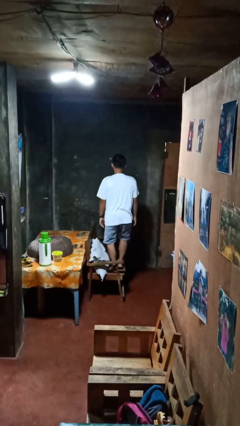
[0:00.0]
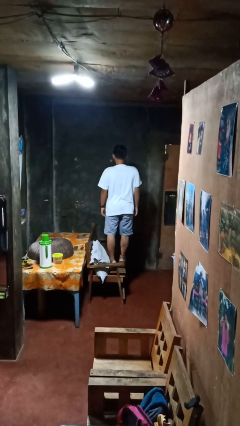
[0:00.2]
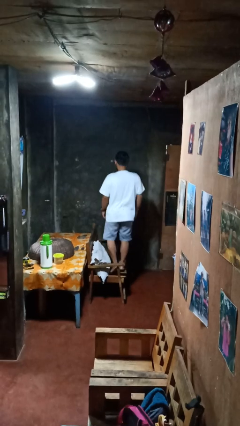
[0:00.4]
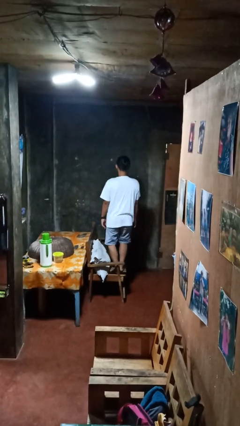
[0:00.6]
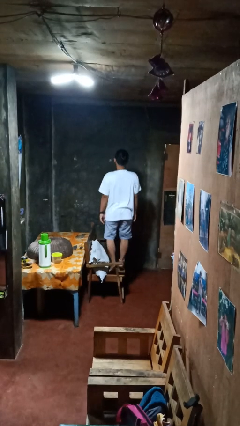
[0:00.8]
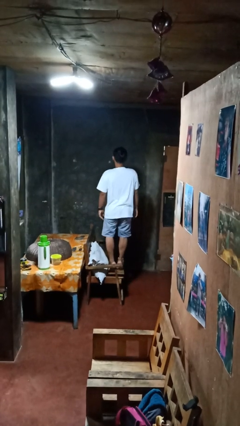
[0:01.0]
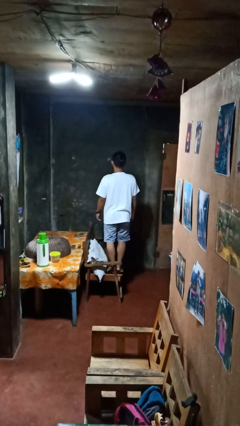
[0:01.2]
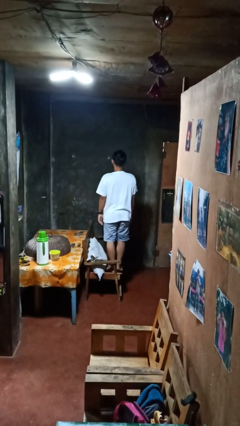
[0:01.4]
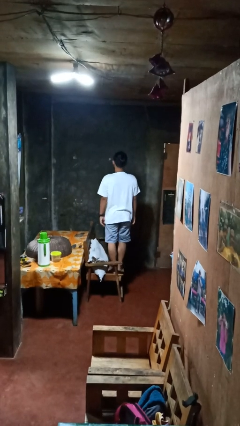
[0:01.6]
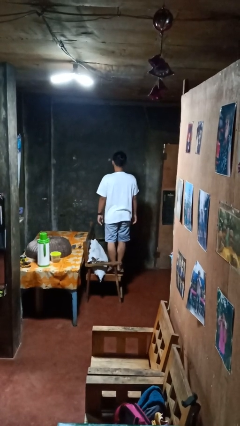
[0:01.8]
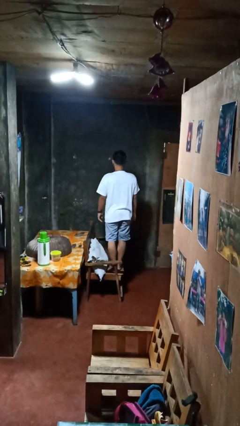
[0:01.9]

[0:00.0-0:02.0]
person jumps on couch

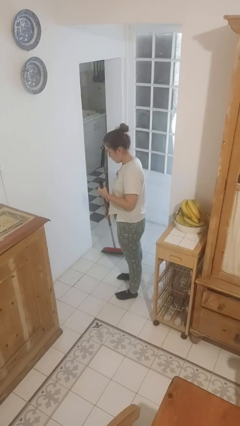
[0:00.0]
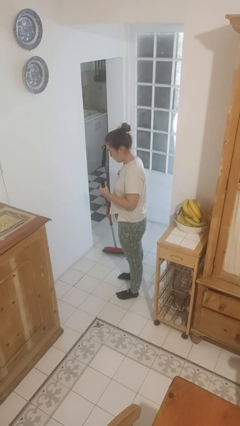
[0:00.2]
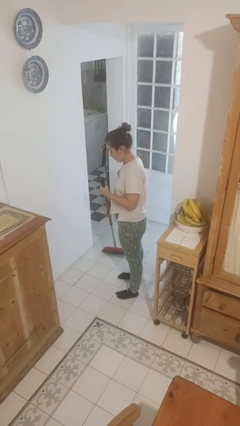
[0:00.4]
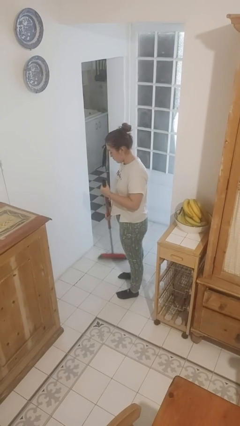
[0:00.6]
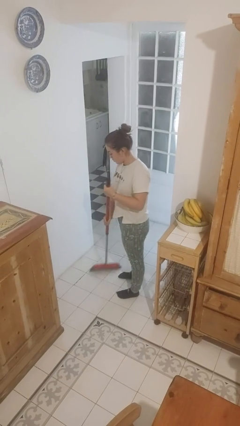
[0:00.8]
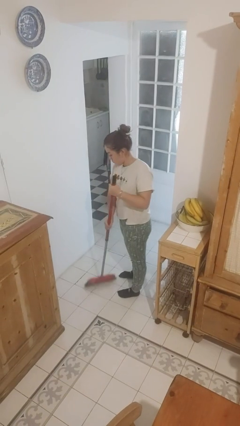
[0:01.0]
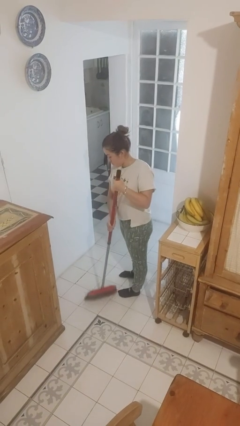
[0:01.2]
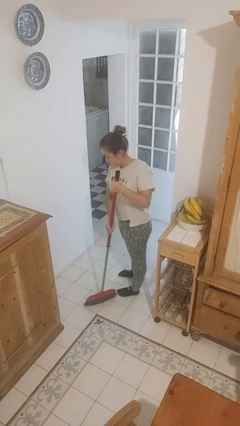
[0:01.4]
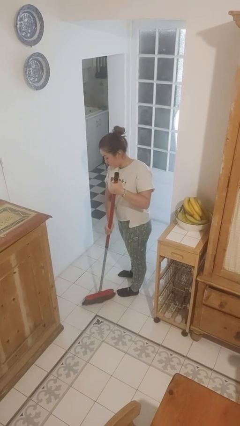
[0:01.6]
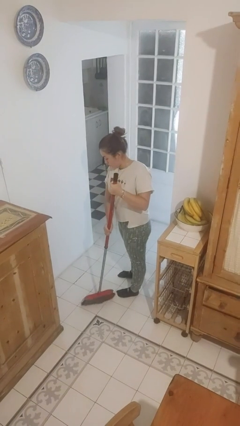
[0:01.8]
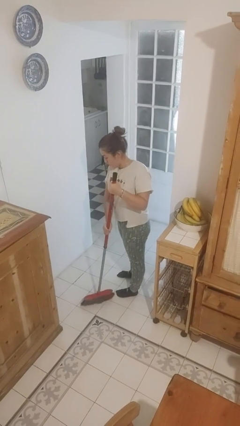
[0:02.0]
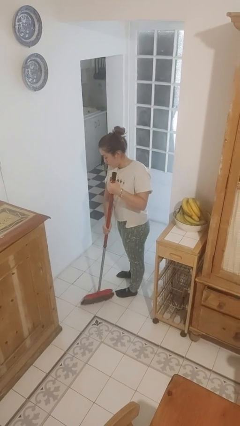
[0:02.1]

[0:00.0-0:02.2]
person sweeps floor

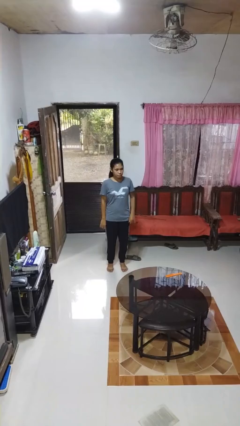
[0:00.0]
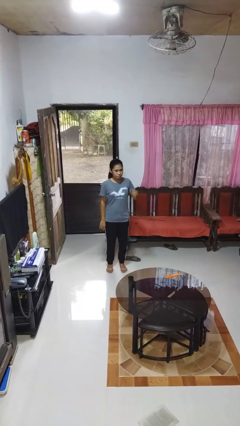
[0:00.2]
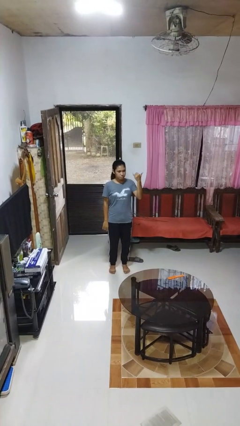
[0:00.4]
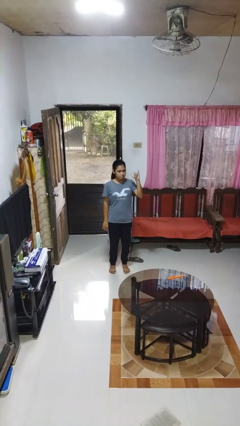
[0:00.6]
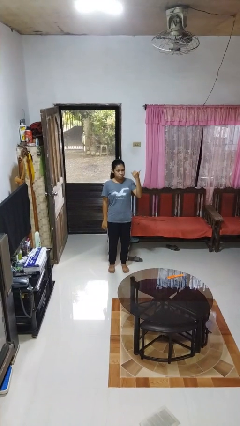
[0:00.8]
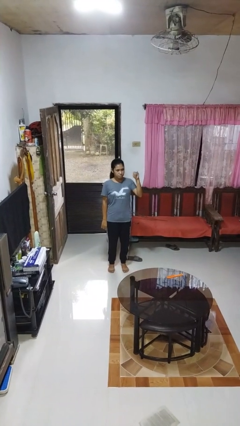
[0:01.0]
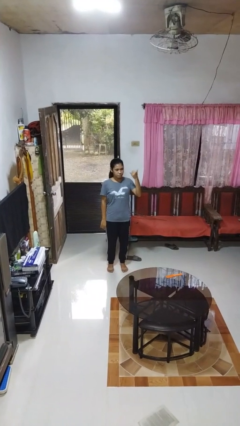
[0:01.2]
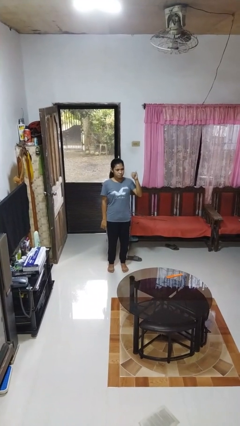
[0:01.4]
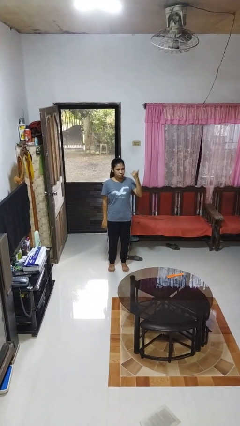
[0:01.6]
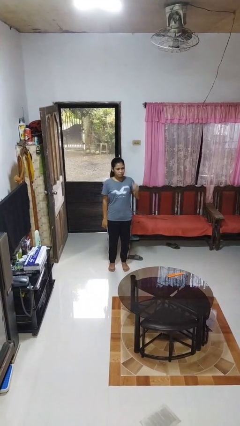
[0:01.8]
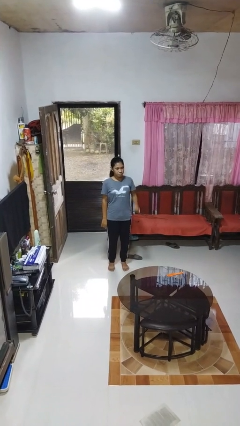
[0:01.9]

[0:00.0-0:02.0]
person gestures hang loose

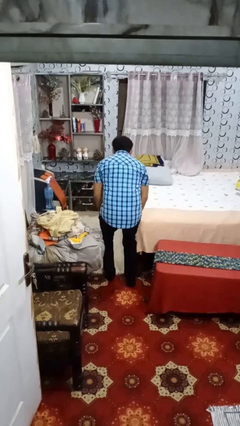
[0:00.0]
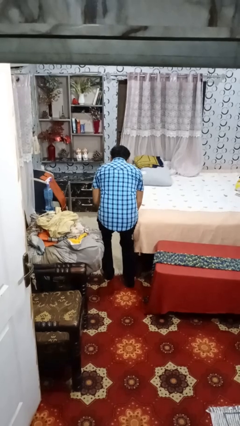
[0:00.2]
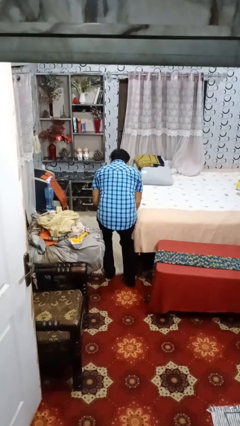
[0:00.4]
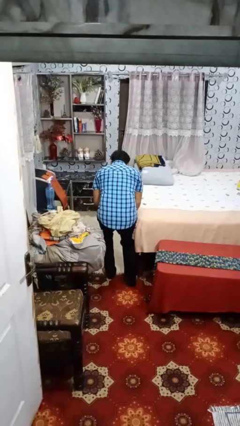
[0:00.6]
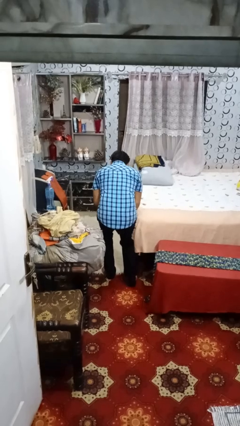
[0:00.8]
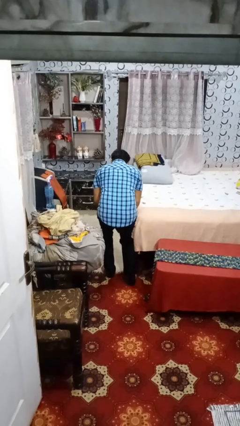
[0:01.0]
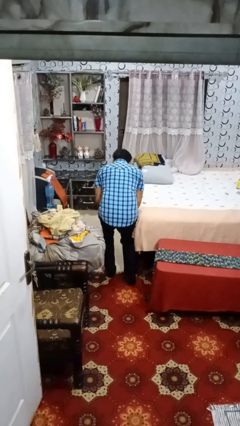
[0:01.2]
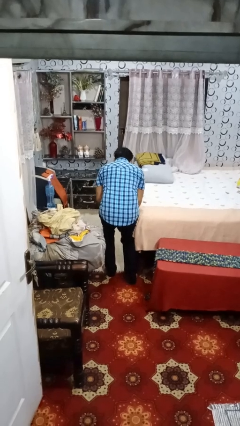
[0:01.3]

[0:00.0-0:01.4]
person stubs toe

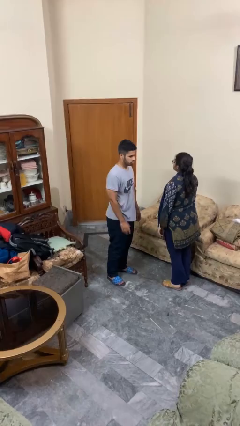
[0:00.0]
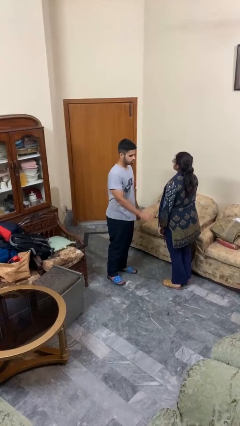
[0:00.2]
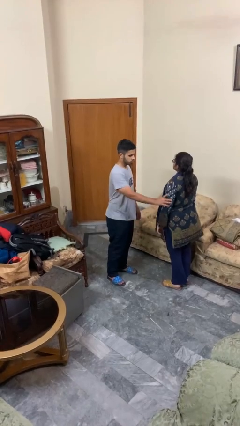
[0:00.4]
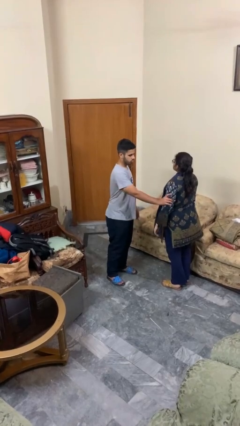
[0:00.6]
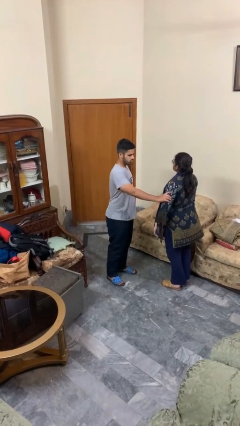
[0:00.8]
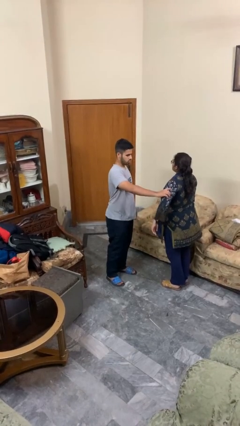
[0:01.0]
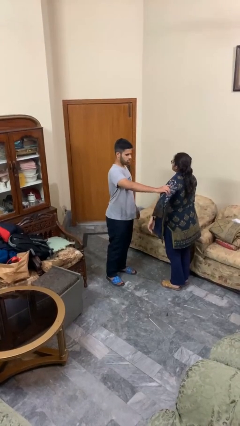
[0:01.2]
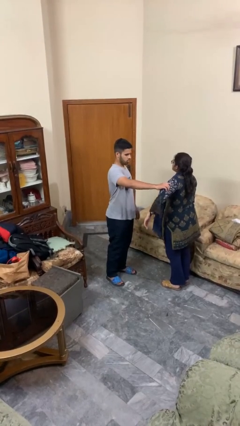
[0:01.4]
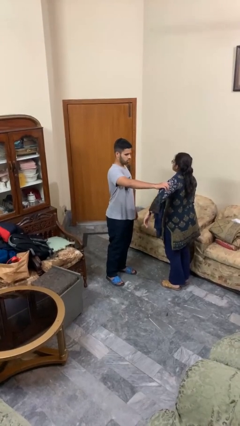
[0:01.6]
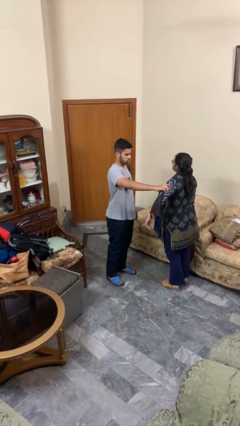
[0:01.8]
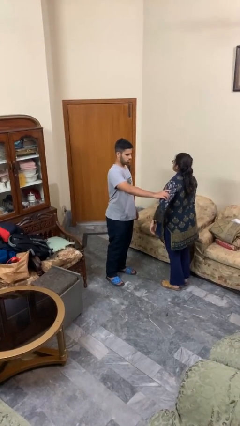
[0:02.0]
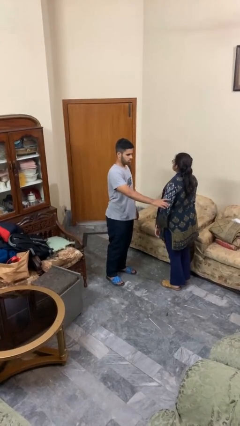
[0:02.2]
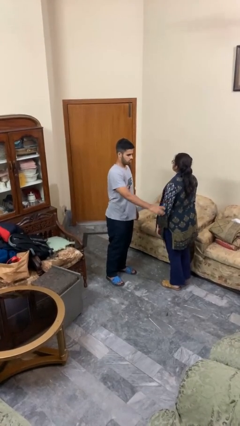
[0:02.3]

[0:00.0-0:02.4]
person grabs person by bicep

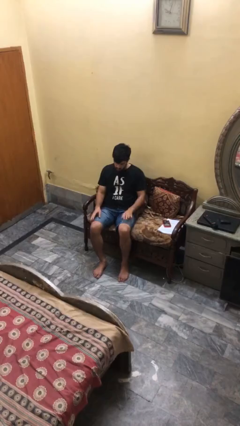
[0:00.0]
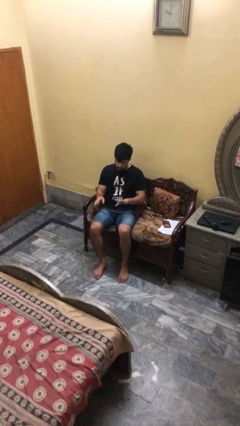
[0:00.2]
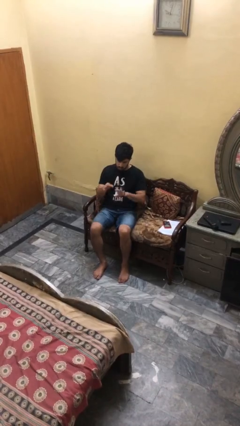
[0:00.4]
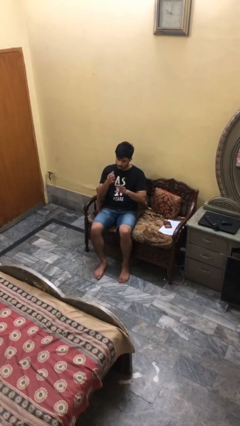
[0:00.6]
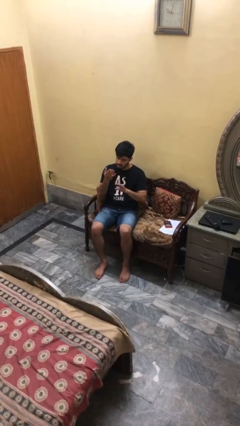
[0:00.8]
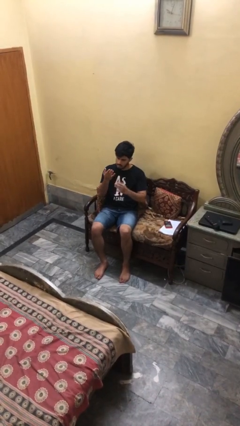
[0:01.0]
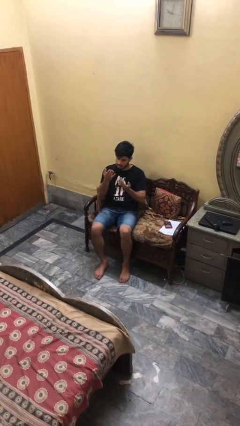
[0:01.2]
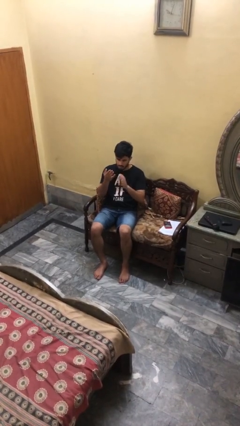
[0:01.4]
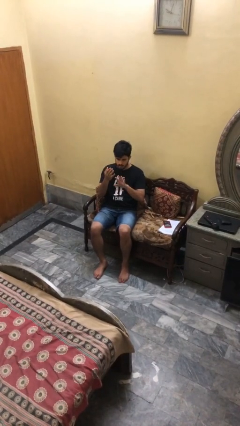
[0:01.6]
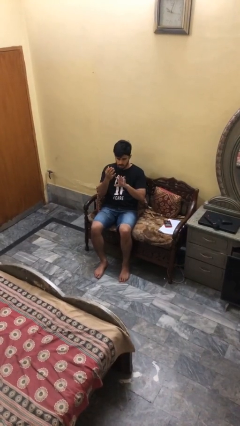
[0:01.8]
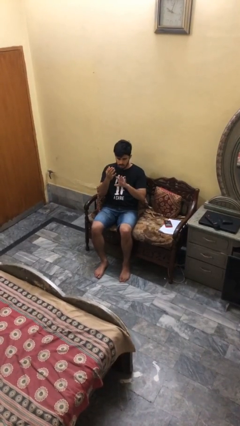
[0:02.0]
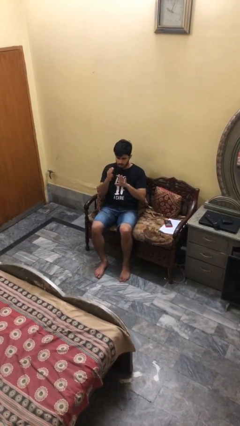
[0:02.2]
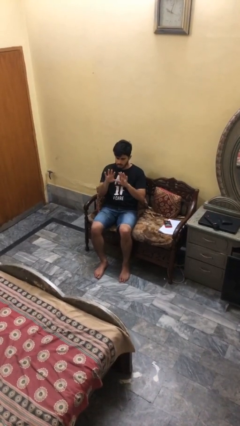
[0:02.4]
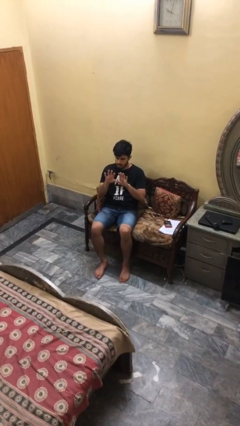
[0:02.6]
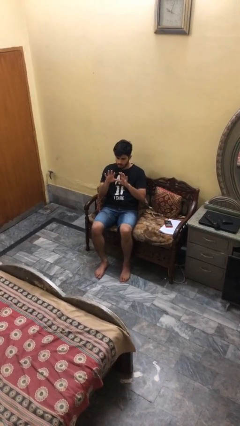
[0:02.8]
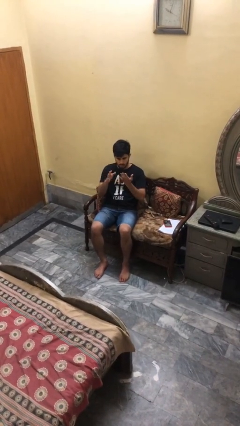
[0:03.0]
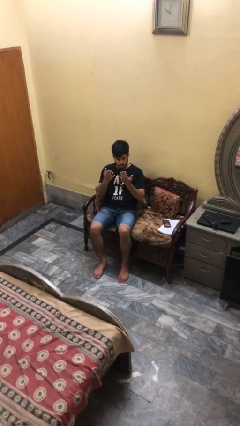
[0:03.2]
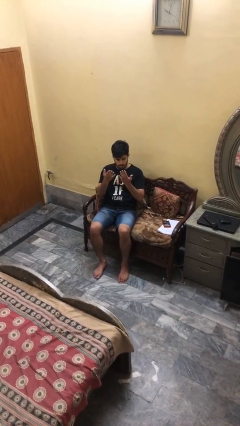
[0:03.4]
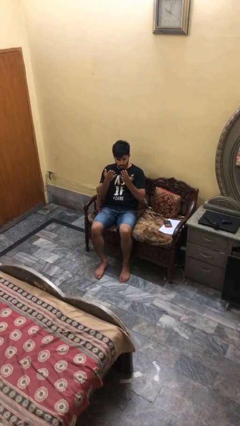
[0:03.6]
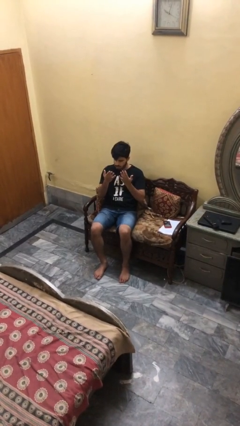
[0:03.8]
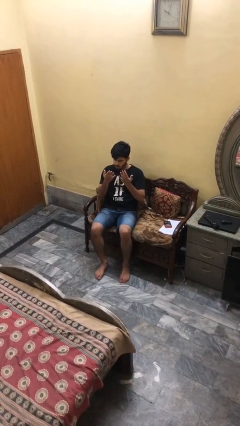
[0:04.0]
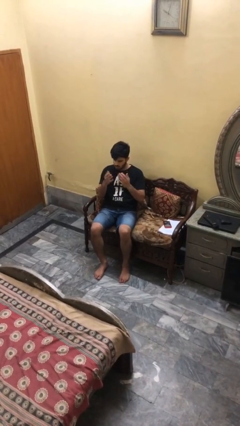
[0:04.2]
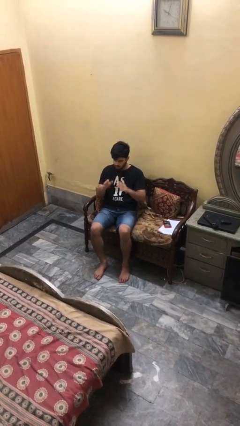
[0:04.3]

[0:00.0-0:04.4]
person looks at hands in lap

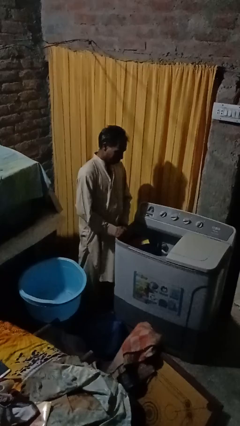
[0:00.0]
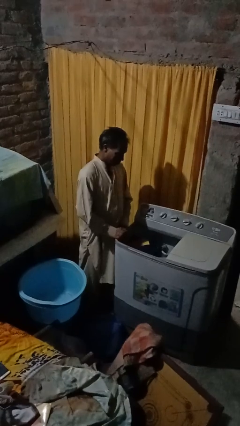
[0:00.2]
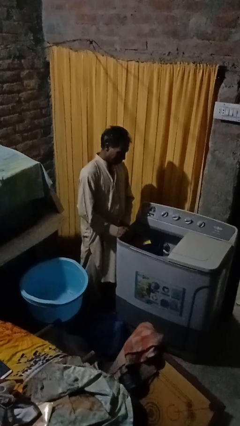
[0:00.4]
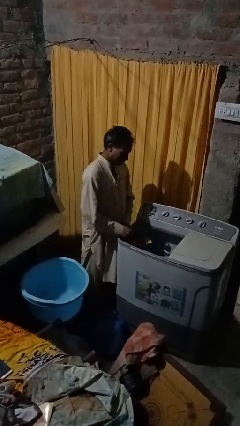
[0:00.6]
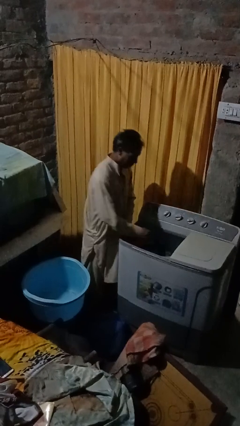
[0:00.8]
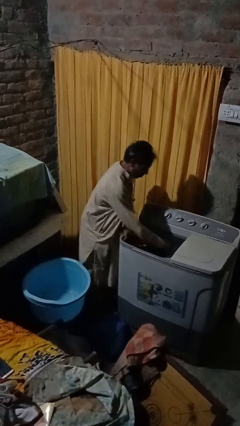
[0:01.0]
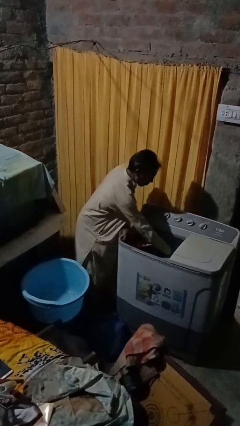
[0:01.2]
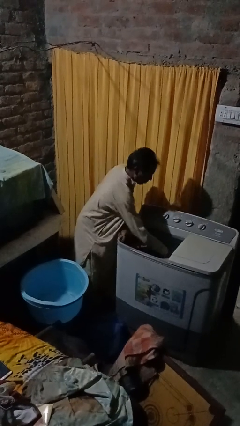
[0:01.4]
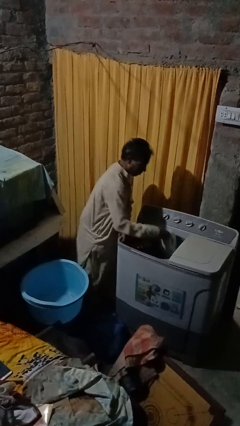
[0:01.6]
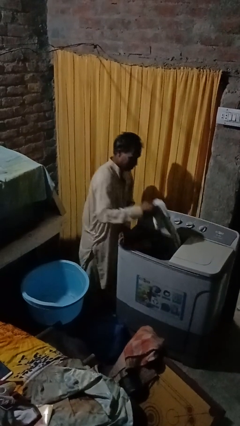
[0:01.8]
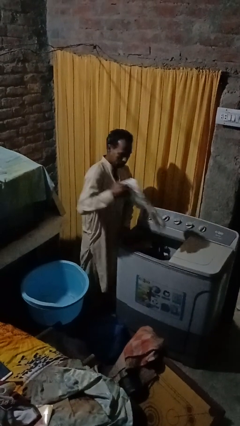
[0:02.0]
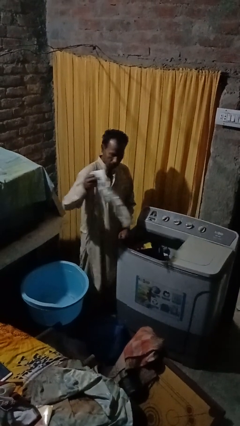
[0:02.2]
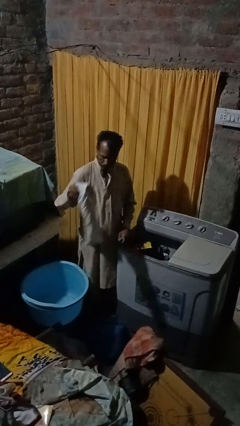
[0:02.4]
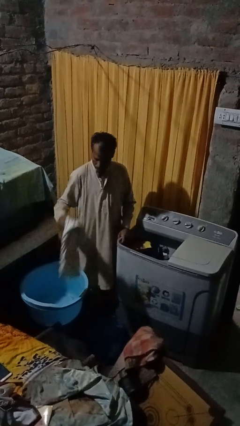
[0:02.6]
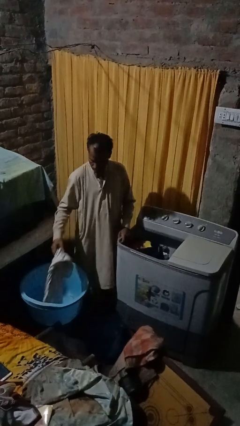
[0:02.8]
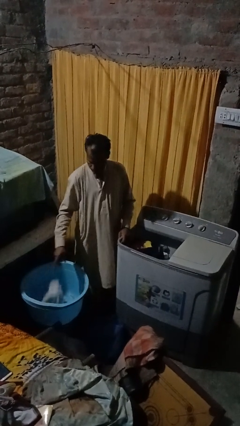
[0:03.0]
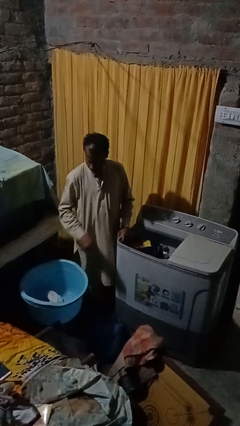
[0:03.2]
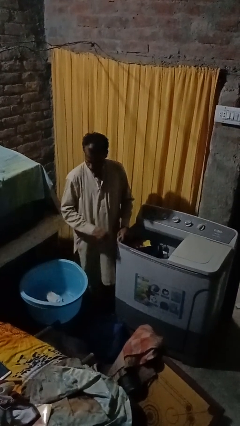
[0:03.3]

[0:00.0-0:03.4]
person unloads clotheswasher
